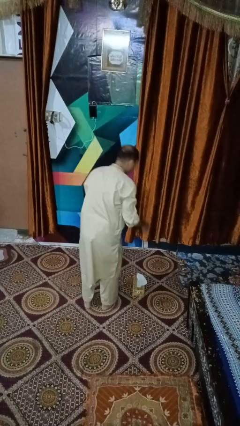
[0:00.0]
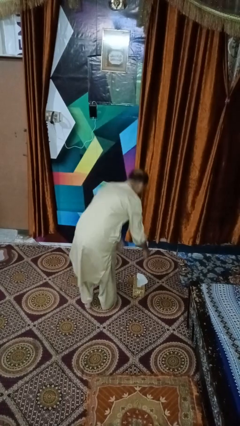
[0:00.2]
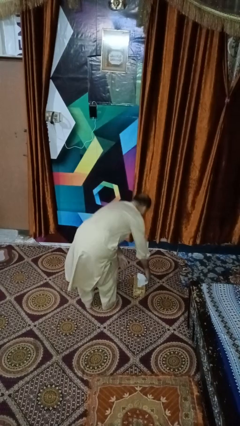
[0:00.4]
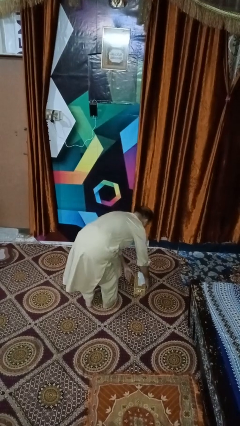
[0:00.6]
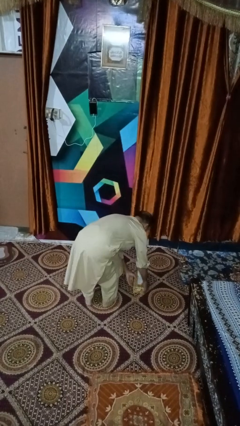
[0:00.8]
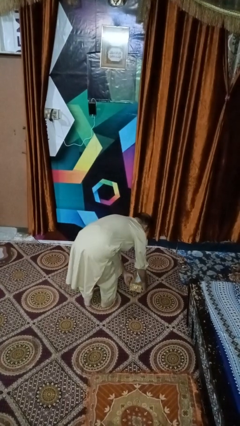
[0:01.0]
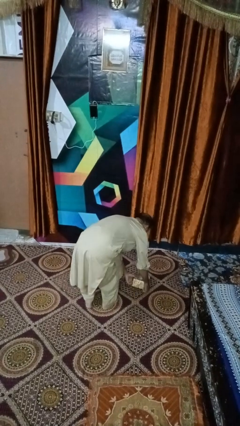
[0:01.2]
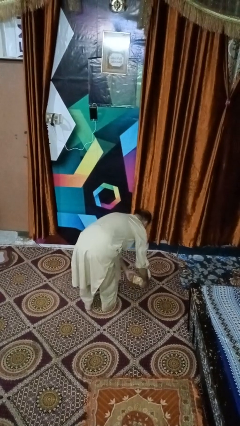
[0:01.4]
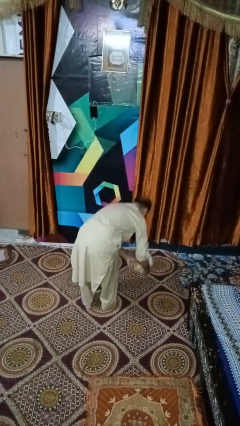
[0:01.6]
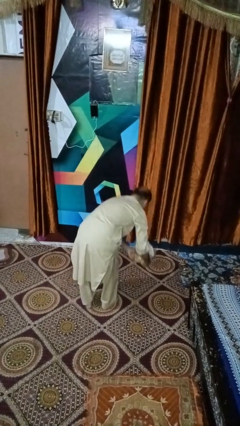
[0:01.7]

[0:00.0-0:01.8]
person picks up object from floor

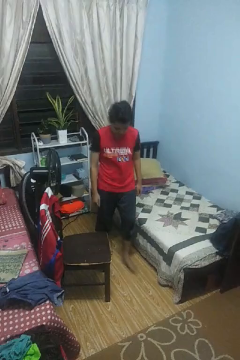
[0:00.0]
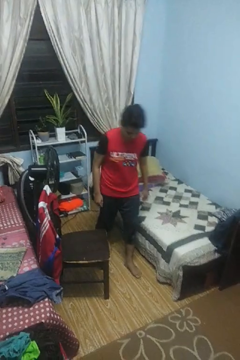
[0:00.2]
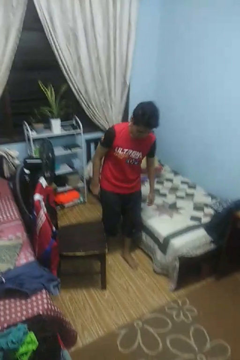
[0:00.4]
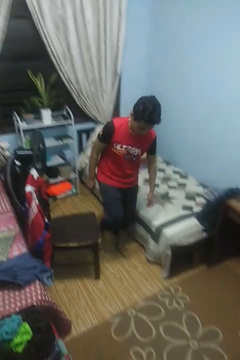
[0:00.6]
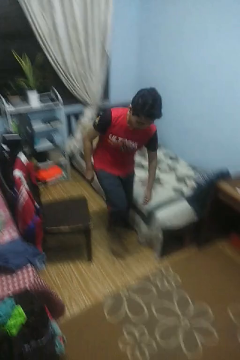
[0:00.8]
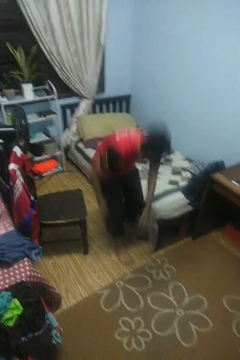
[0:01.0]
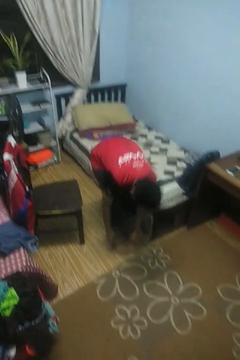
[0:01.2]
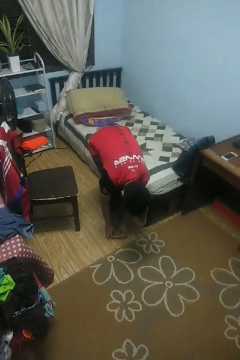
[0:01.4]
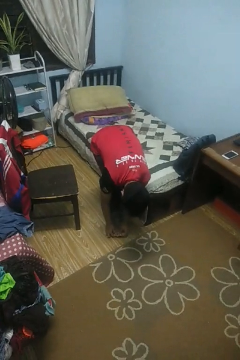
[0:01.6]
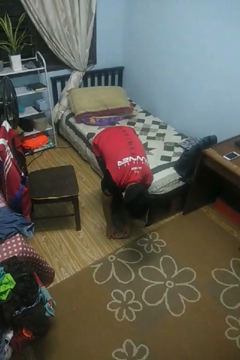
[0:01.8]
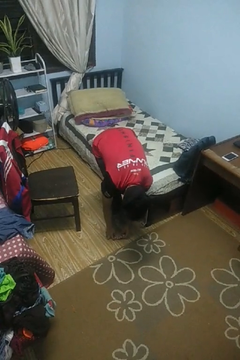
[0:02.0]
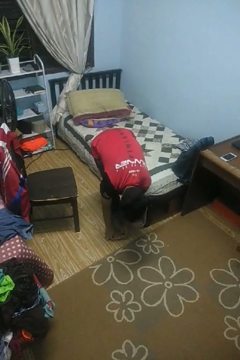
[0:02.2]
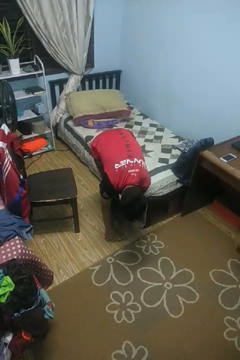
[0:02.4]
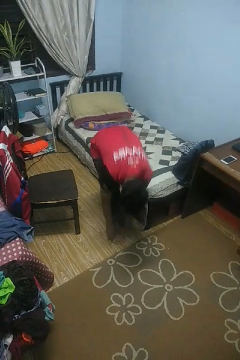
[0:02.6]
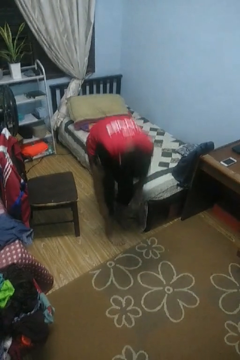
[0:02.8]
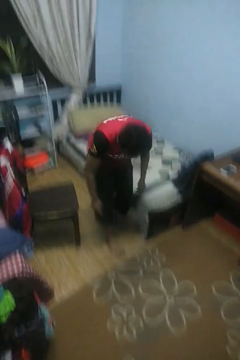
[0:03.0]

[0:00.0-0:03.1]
person stubs toe

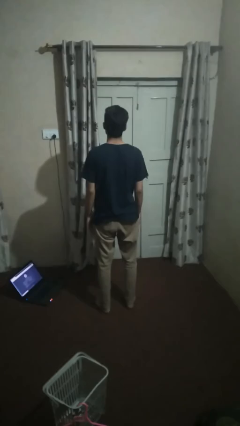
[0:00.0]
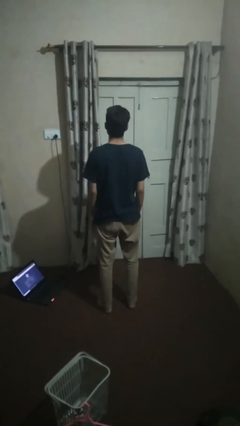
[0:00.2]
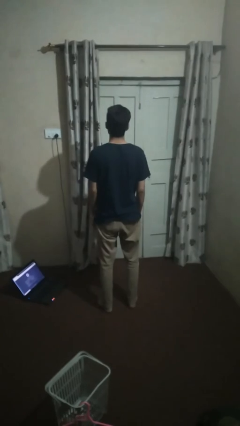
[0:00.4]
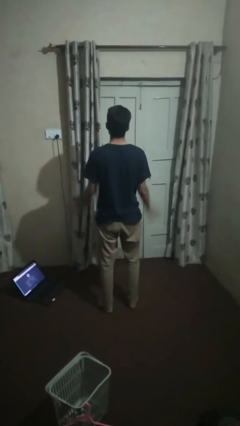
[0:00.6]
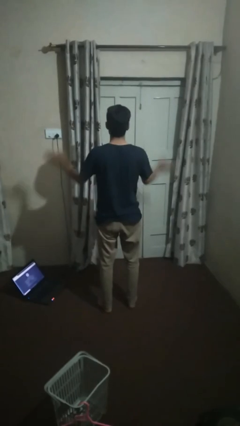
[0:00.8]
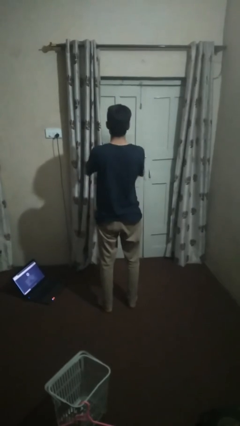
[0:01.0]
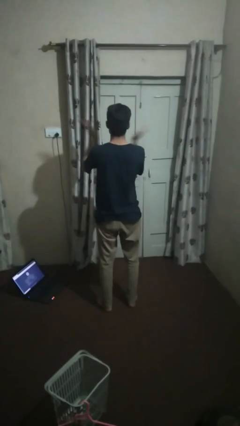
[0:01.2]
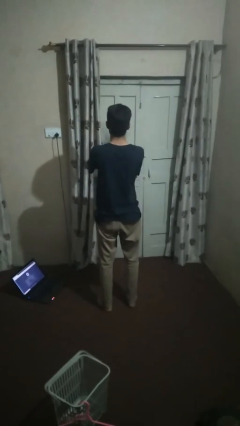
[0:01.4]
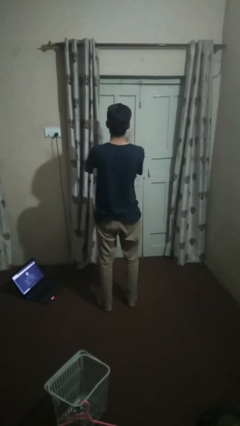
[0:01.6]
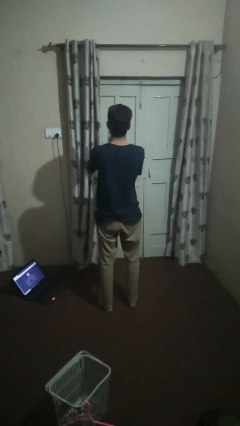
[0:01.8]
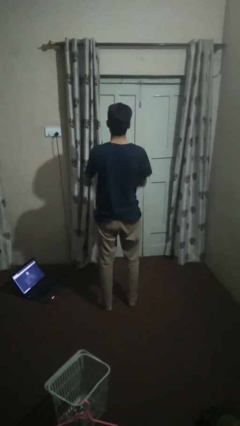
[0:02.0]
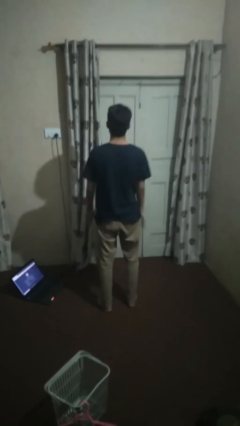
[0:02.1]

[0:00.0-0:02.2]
person claps hands

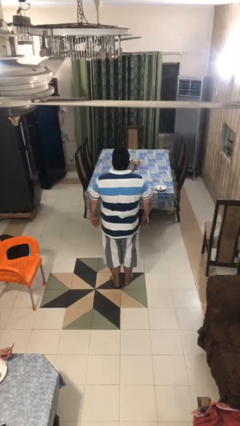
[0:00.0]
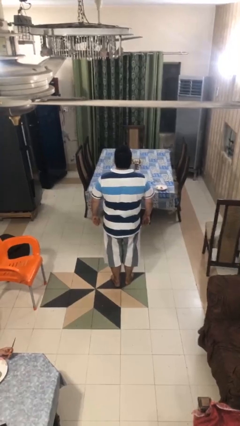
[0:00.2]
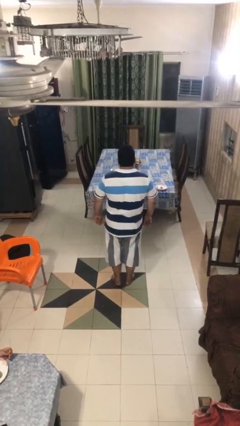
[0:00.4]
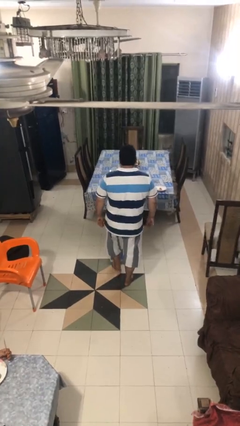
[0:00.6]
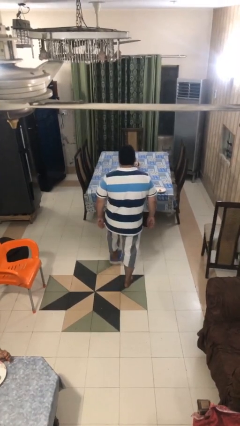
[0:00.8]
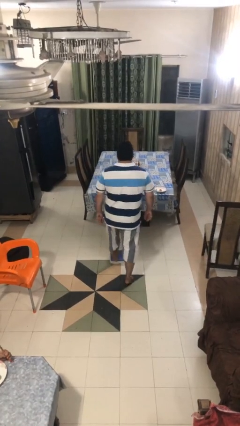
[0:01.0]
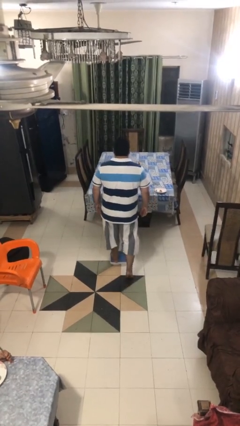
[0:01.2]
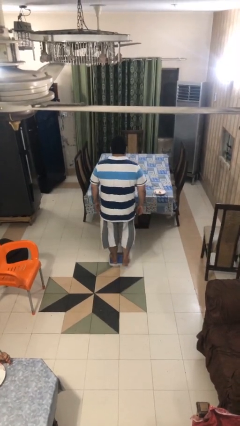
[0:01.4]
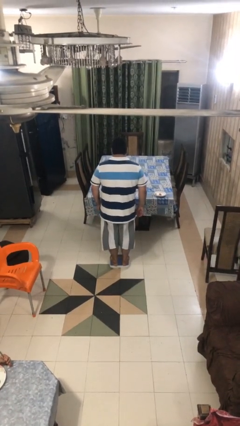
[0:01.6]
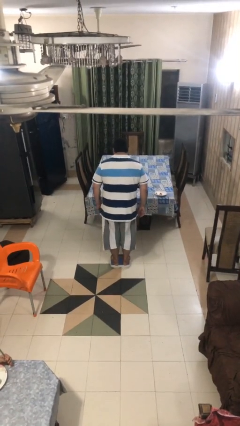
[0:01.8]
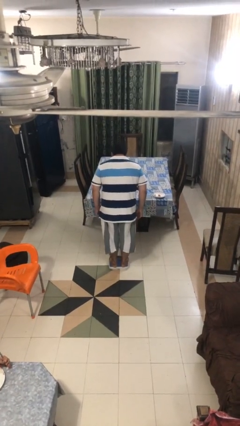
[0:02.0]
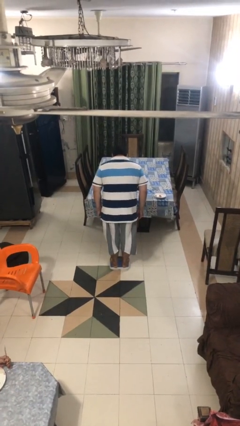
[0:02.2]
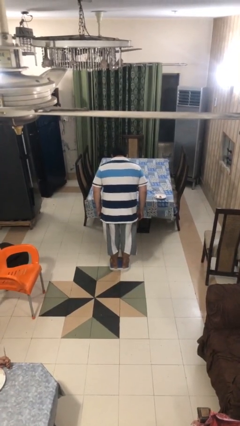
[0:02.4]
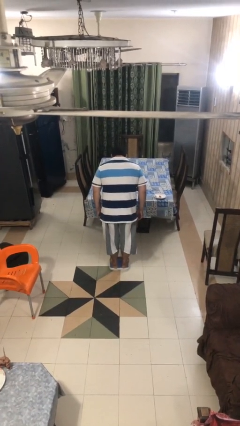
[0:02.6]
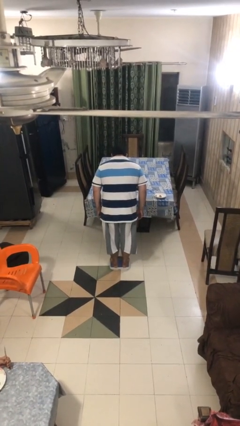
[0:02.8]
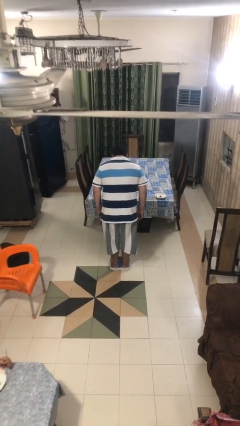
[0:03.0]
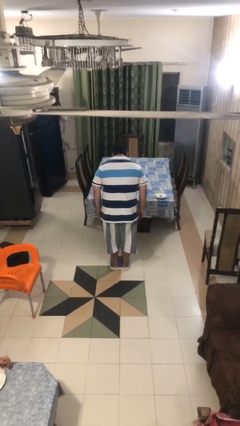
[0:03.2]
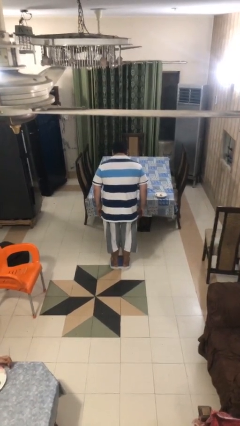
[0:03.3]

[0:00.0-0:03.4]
person uses bodyweight scale

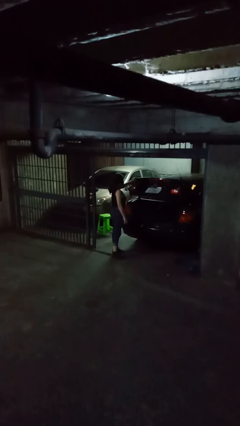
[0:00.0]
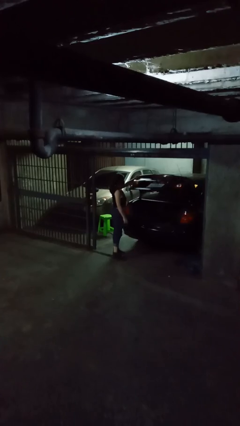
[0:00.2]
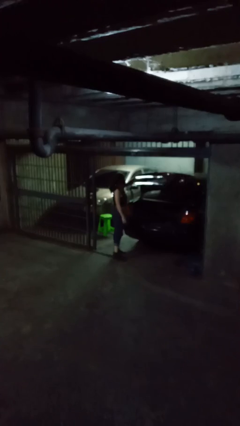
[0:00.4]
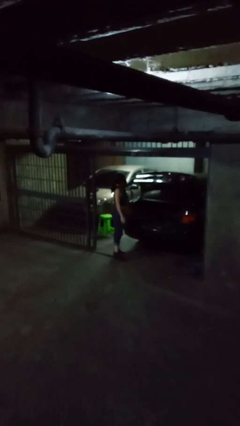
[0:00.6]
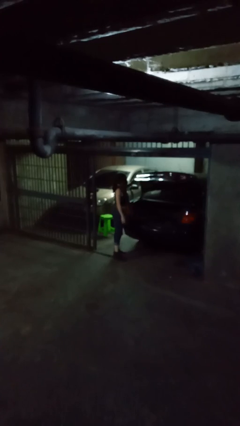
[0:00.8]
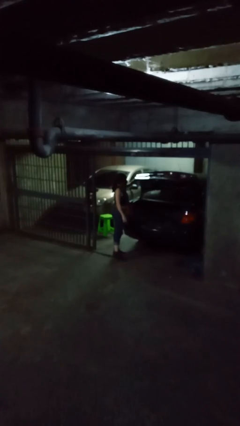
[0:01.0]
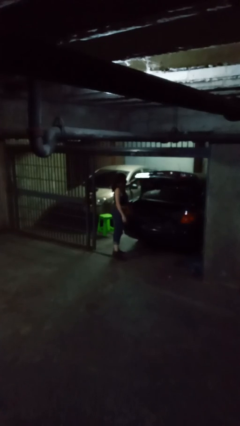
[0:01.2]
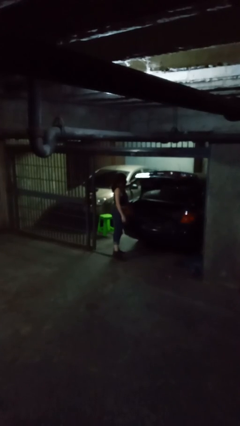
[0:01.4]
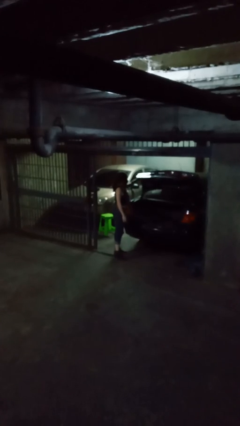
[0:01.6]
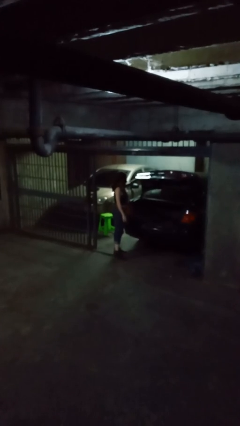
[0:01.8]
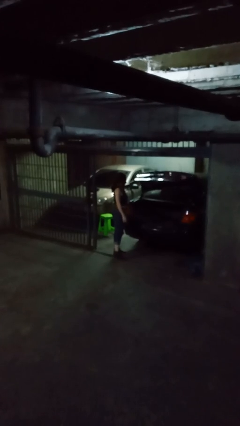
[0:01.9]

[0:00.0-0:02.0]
person opens car trunk

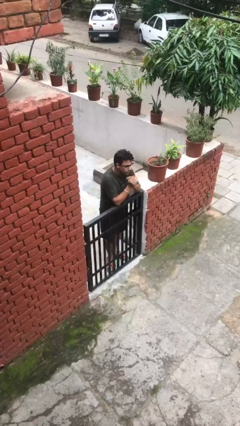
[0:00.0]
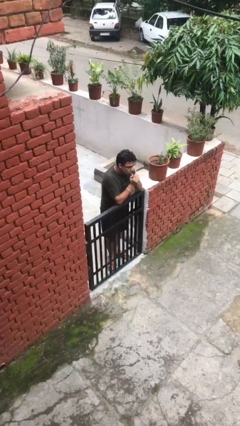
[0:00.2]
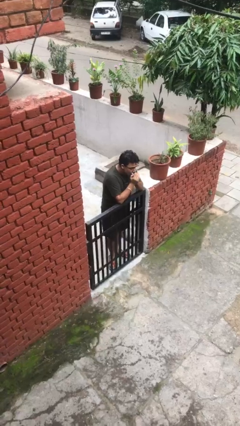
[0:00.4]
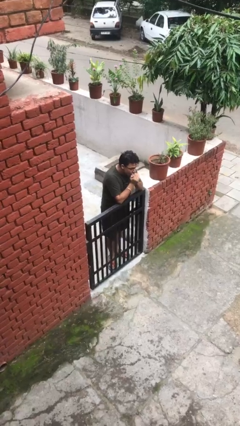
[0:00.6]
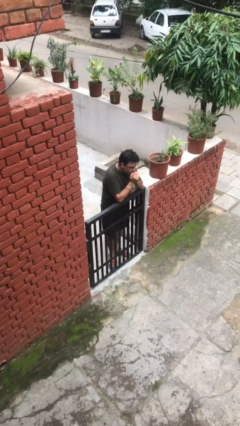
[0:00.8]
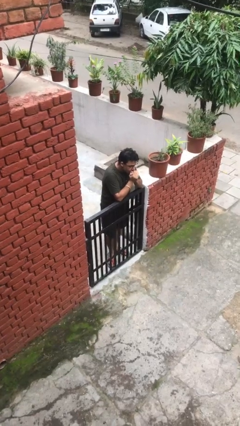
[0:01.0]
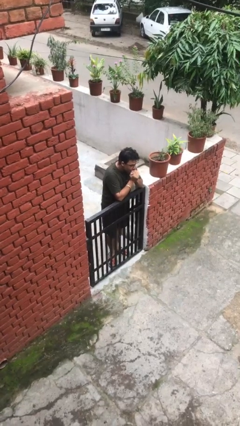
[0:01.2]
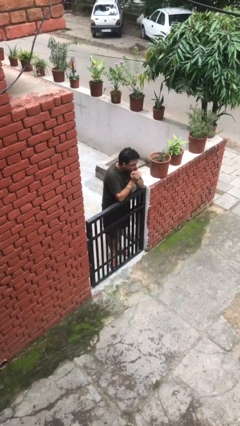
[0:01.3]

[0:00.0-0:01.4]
person blows into hands

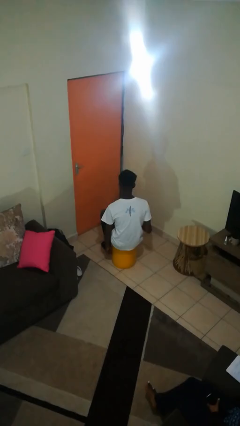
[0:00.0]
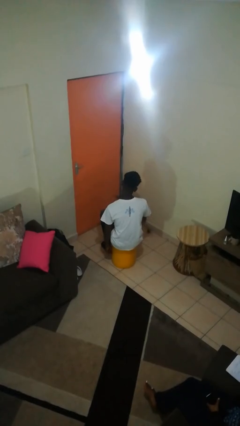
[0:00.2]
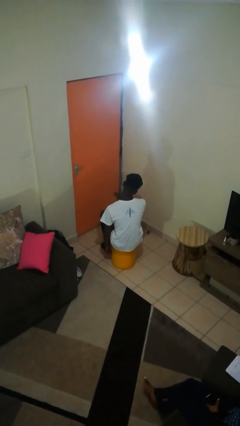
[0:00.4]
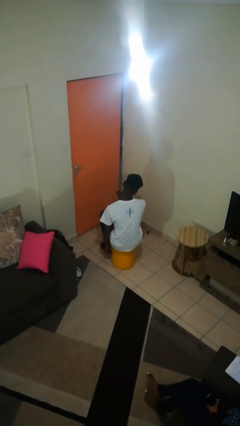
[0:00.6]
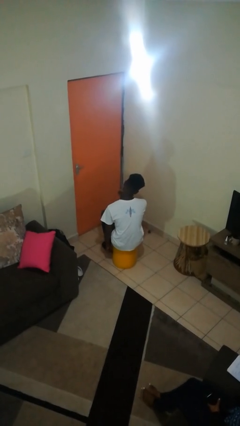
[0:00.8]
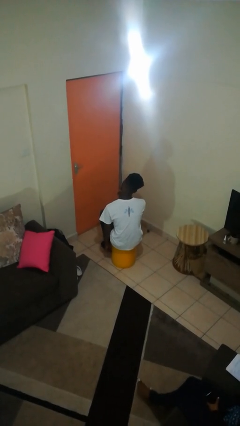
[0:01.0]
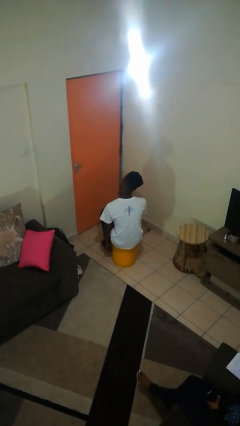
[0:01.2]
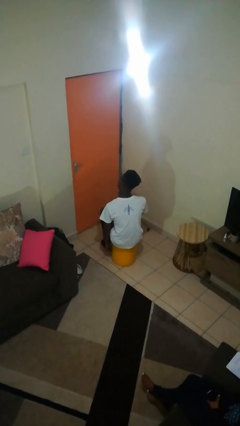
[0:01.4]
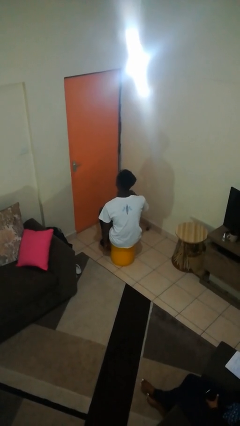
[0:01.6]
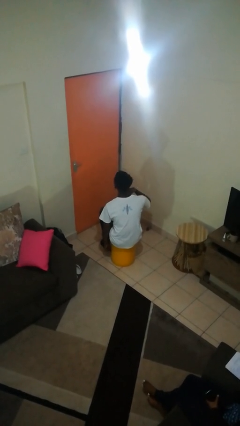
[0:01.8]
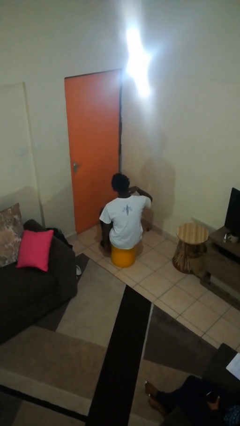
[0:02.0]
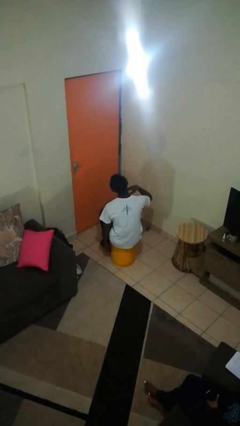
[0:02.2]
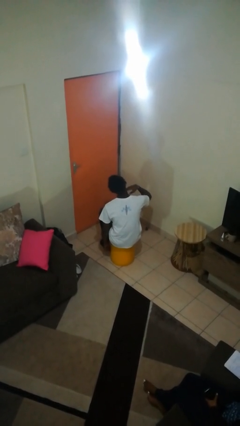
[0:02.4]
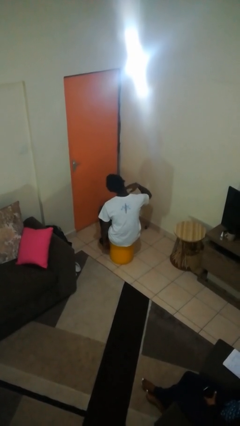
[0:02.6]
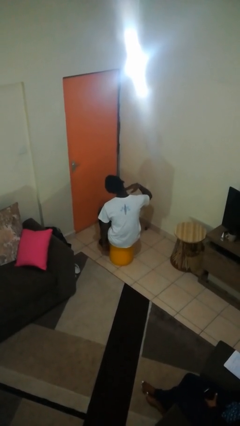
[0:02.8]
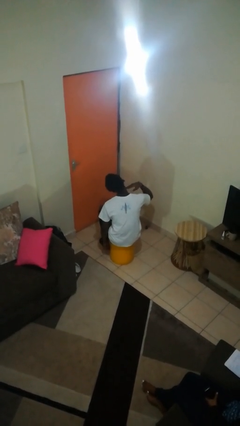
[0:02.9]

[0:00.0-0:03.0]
person gestures cut

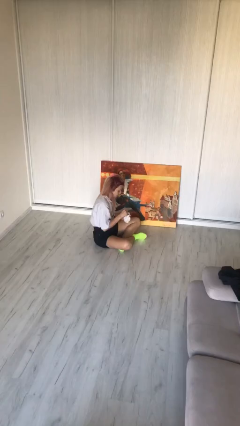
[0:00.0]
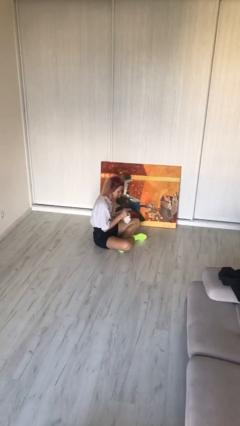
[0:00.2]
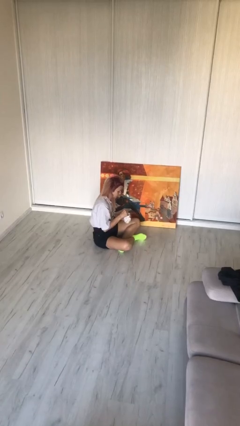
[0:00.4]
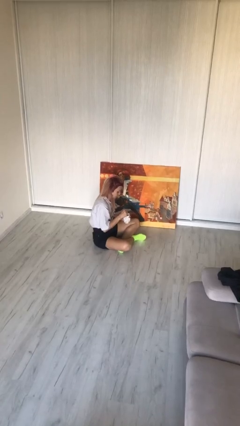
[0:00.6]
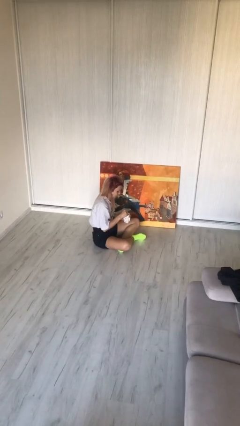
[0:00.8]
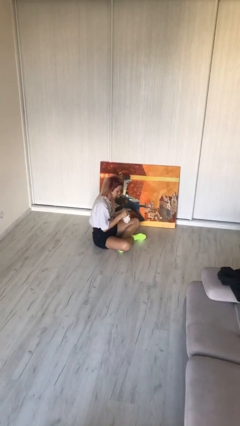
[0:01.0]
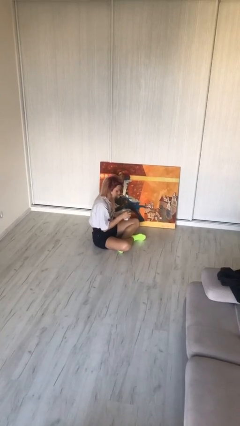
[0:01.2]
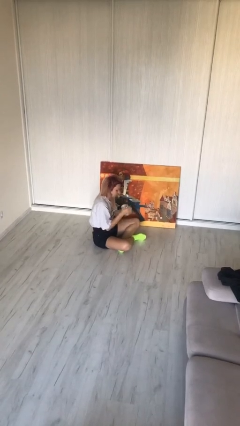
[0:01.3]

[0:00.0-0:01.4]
person stirs mug
